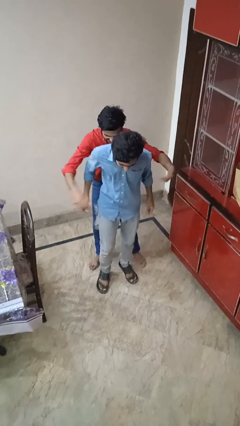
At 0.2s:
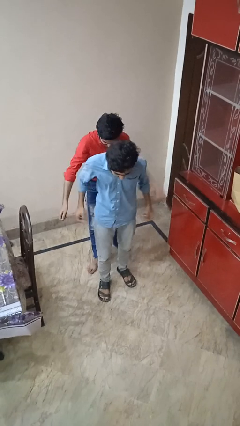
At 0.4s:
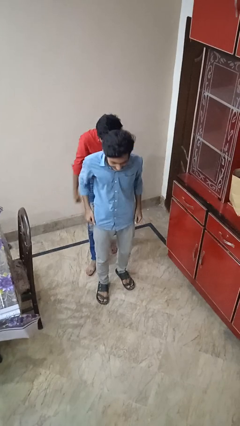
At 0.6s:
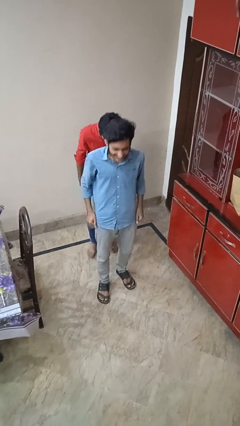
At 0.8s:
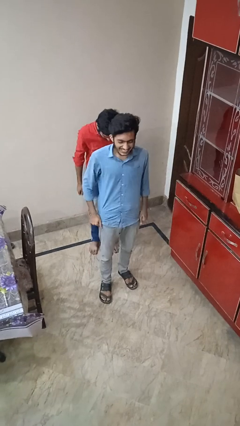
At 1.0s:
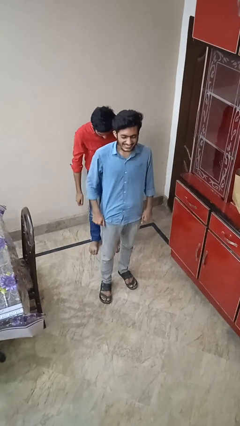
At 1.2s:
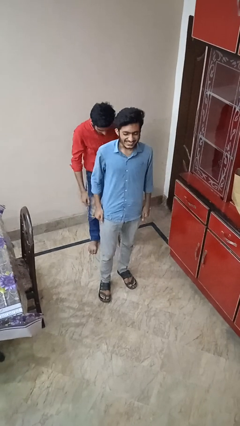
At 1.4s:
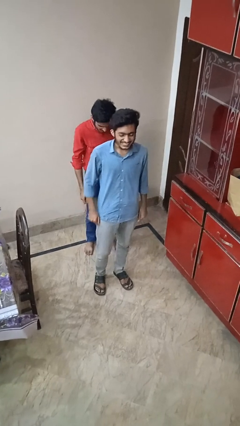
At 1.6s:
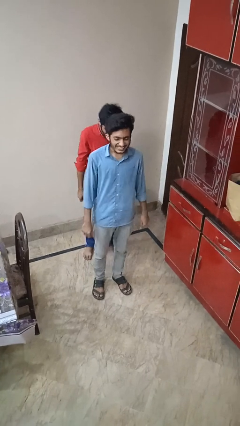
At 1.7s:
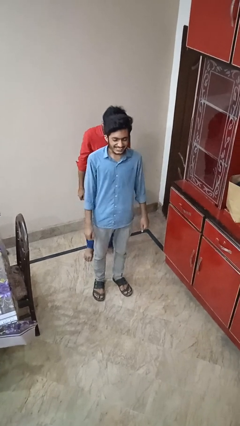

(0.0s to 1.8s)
person puts down person

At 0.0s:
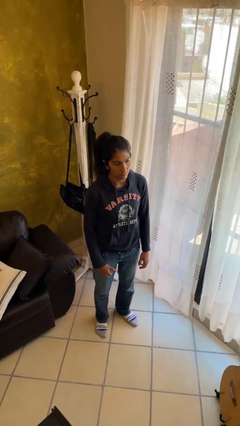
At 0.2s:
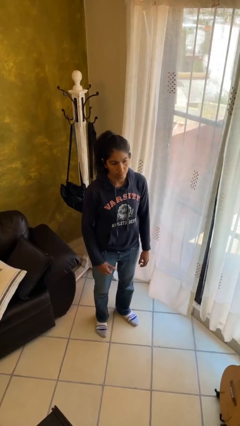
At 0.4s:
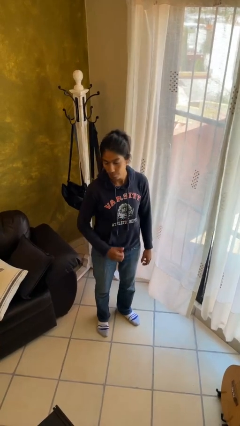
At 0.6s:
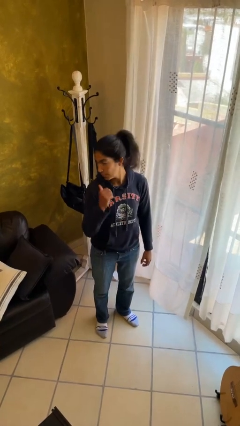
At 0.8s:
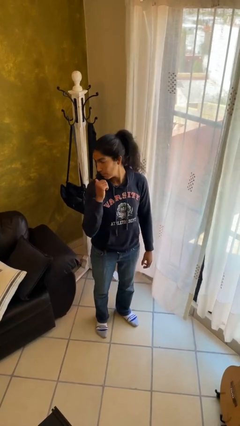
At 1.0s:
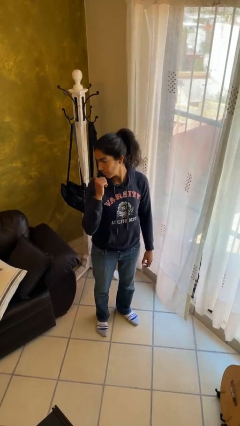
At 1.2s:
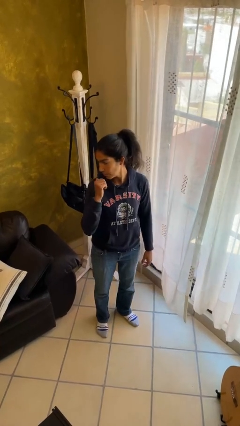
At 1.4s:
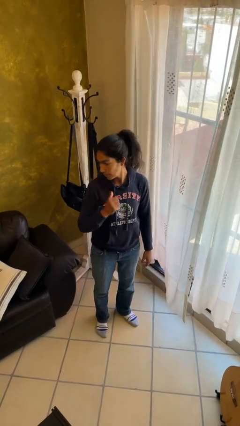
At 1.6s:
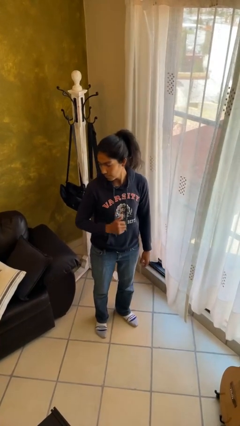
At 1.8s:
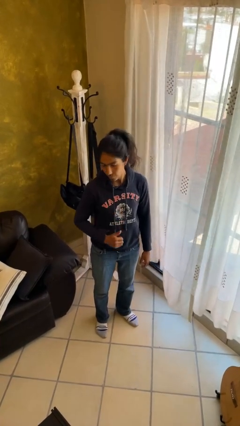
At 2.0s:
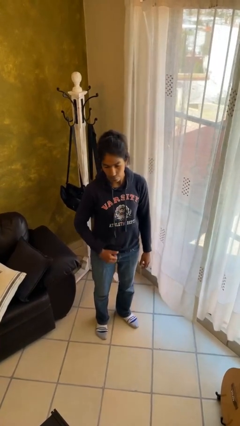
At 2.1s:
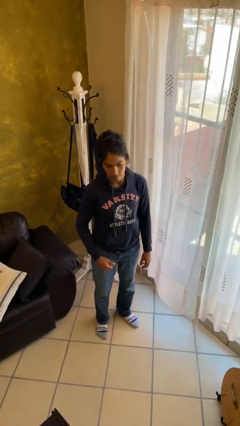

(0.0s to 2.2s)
person gestures behind me

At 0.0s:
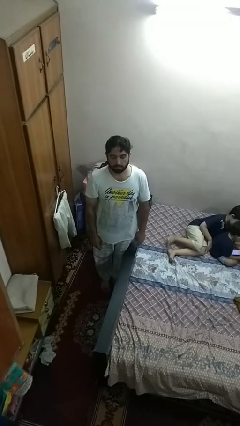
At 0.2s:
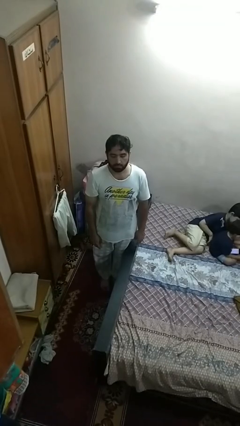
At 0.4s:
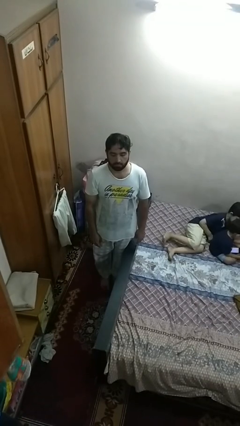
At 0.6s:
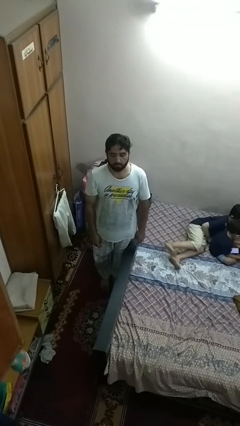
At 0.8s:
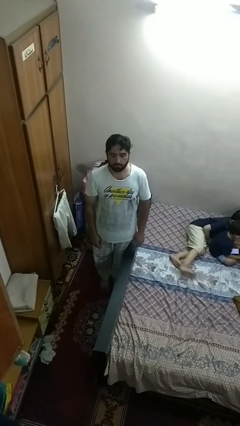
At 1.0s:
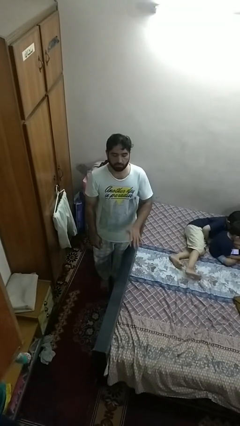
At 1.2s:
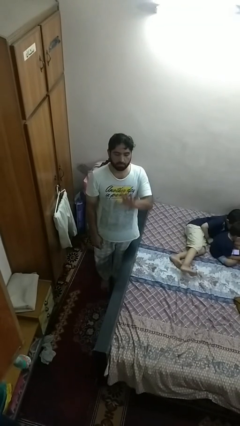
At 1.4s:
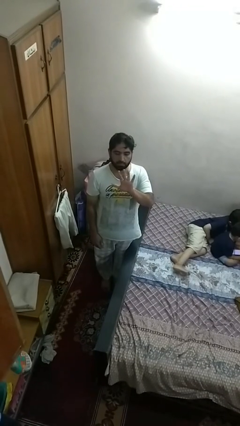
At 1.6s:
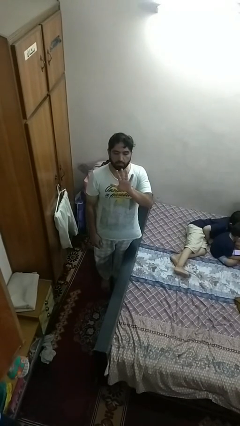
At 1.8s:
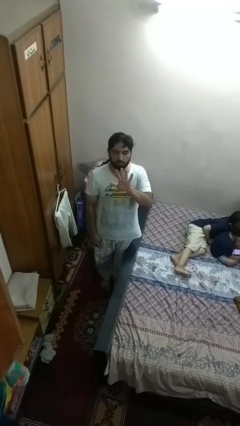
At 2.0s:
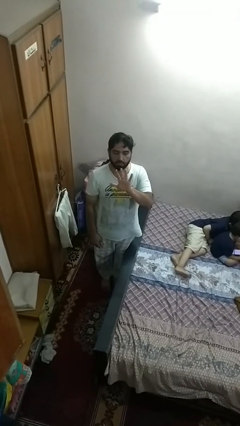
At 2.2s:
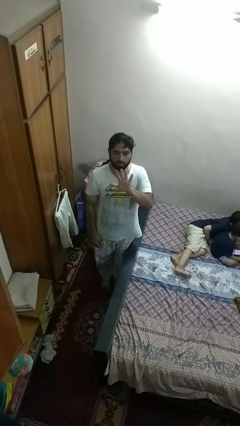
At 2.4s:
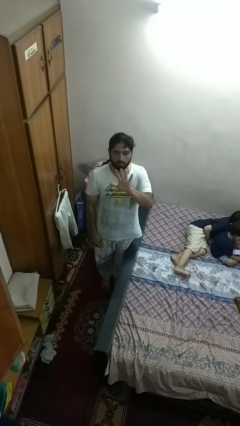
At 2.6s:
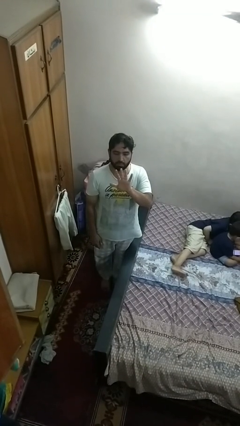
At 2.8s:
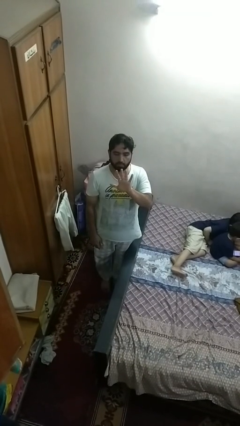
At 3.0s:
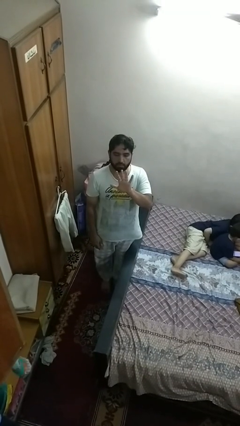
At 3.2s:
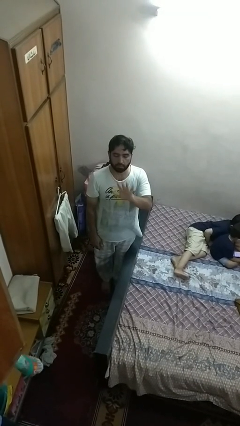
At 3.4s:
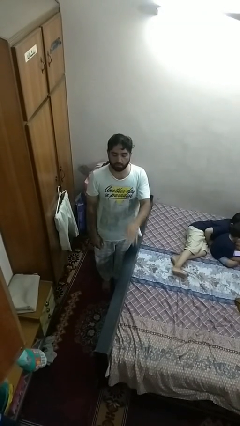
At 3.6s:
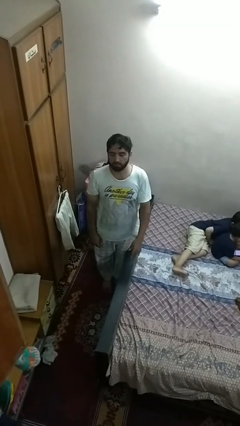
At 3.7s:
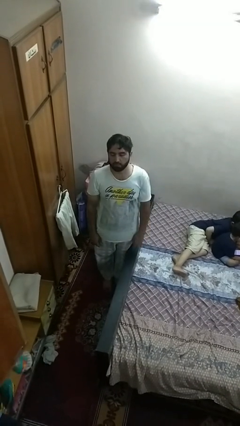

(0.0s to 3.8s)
person gestures number five

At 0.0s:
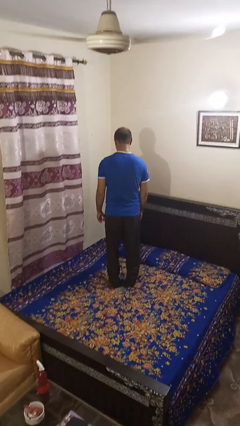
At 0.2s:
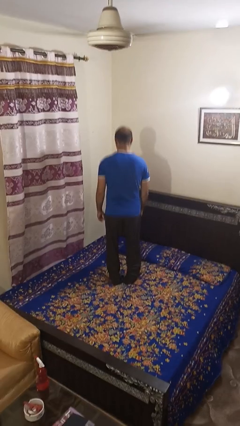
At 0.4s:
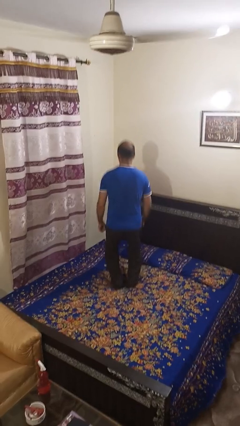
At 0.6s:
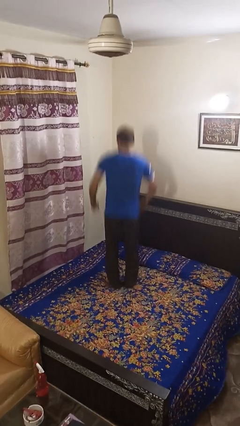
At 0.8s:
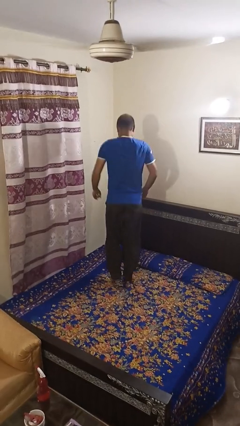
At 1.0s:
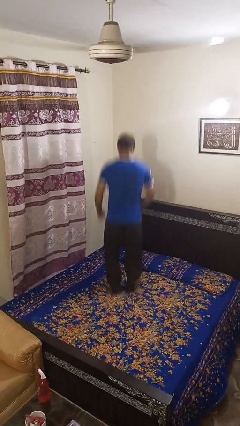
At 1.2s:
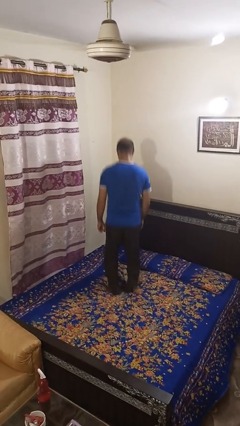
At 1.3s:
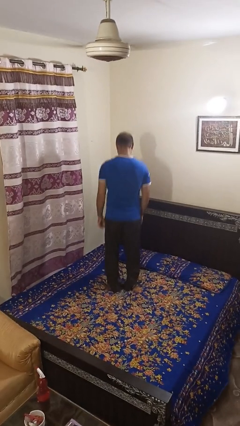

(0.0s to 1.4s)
person jumps on bed

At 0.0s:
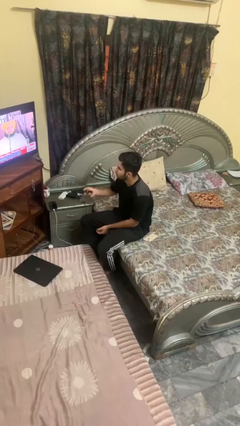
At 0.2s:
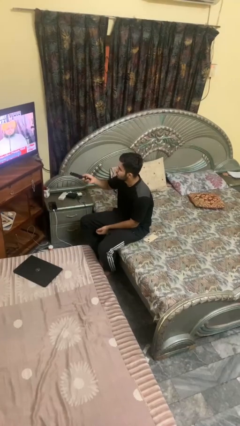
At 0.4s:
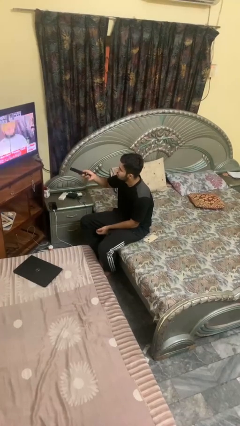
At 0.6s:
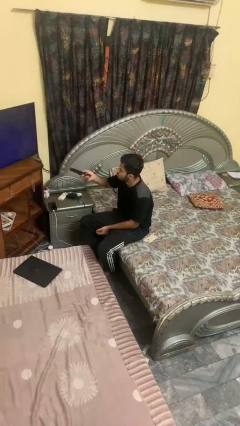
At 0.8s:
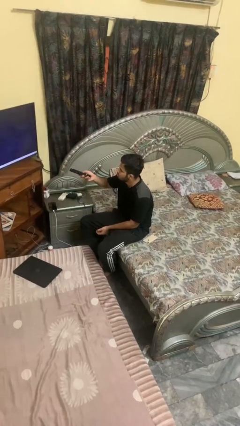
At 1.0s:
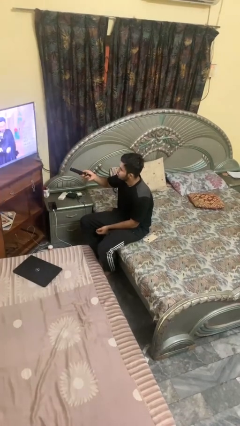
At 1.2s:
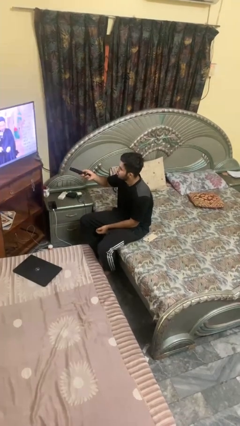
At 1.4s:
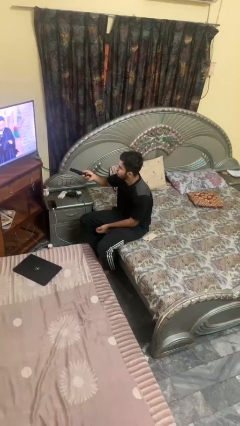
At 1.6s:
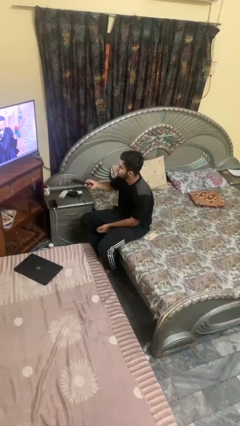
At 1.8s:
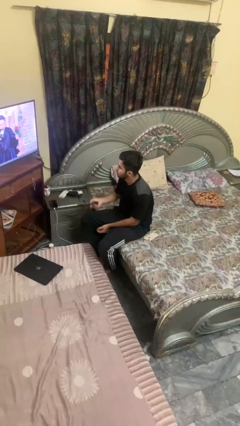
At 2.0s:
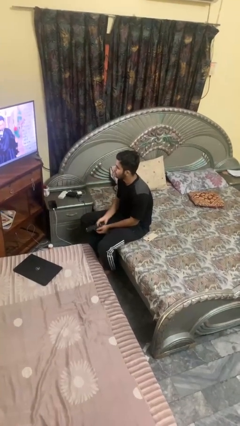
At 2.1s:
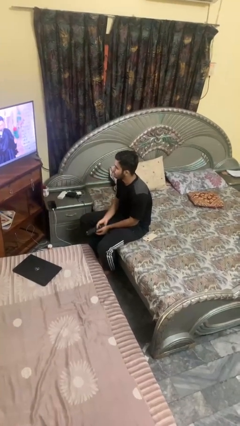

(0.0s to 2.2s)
person uses television remote

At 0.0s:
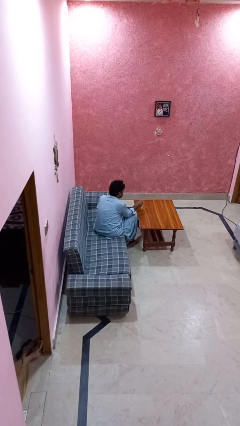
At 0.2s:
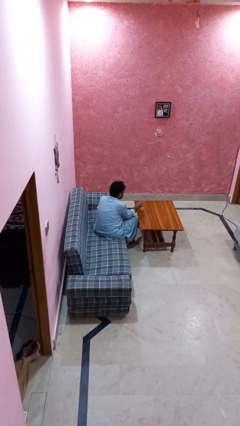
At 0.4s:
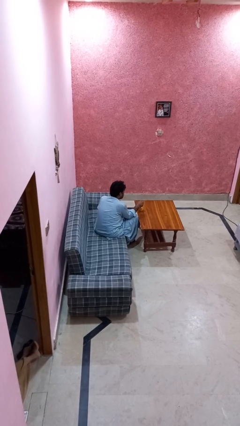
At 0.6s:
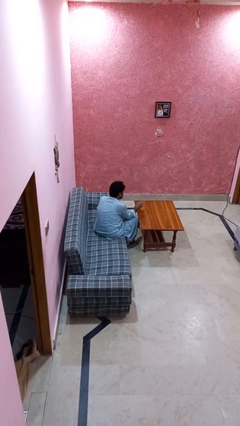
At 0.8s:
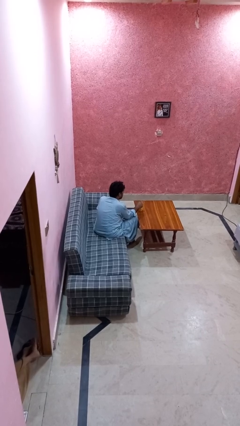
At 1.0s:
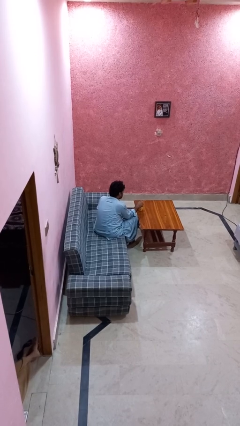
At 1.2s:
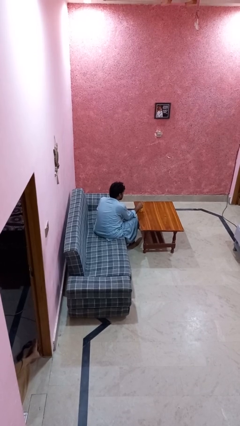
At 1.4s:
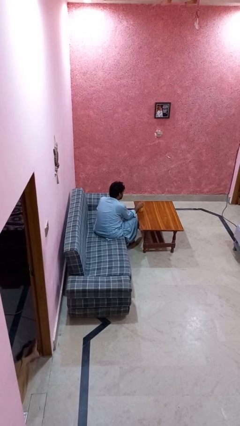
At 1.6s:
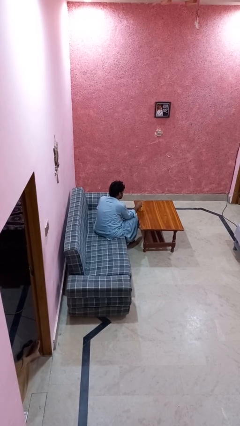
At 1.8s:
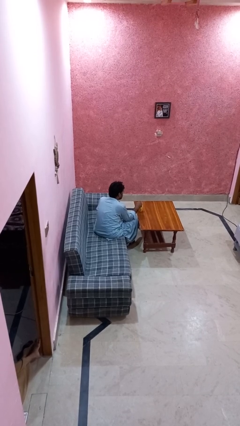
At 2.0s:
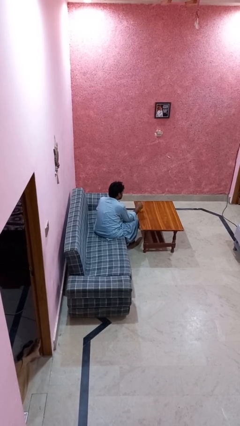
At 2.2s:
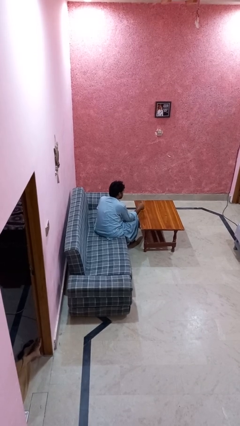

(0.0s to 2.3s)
person stirs mug

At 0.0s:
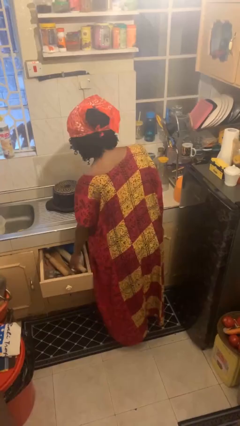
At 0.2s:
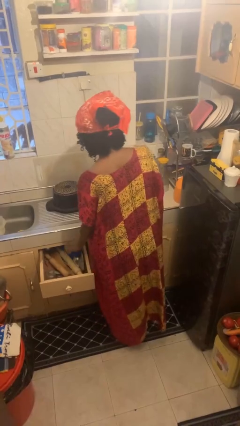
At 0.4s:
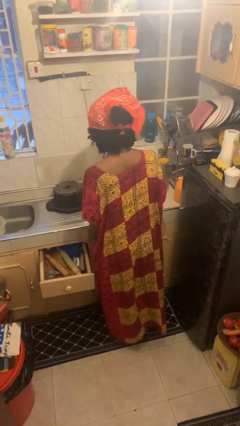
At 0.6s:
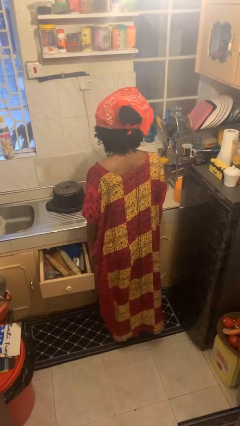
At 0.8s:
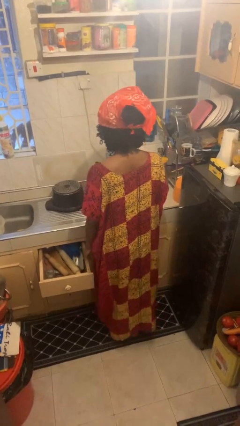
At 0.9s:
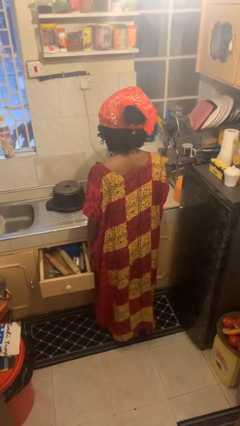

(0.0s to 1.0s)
person puts object into kitchen drawer

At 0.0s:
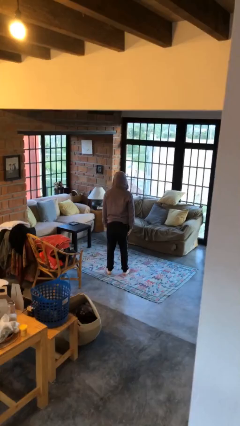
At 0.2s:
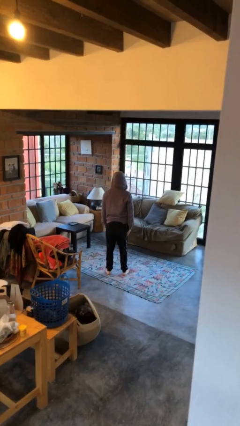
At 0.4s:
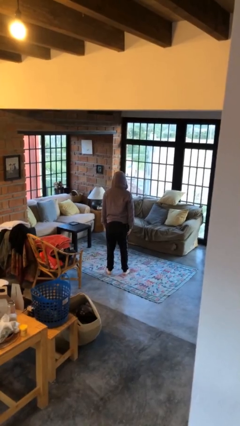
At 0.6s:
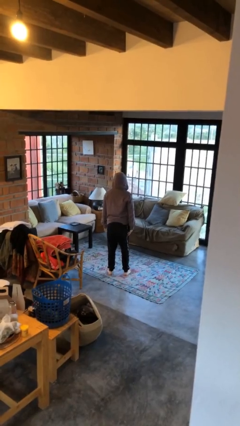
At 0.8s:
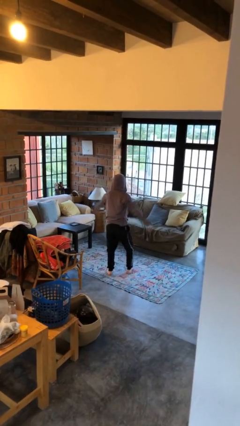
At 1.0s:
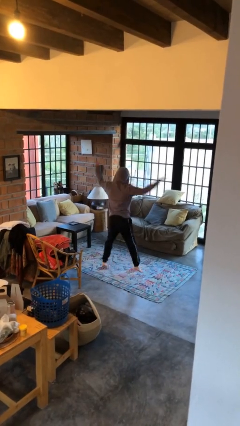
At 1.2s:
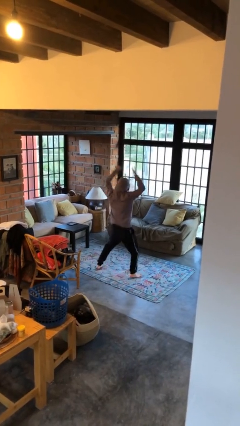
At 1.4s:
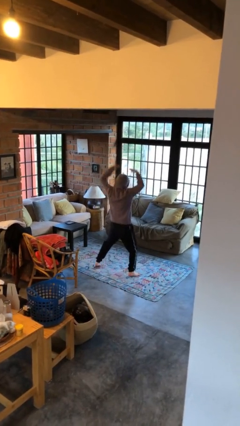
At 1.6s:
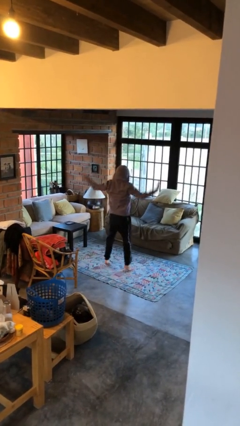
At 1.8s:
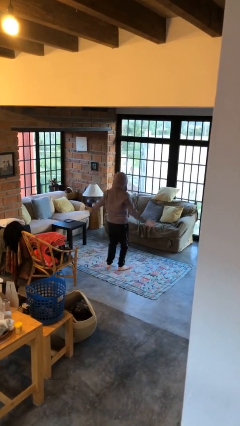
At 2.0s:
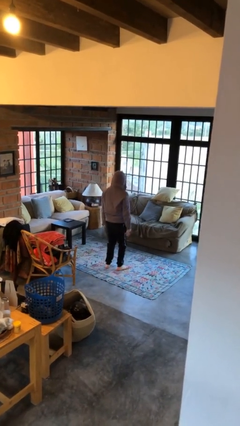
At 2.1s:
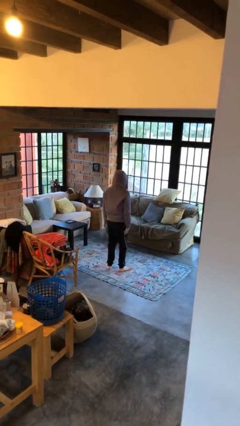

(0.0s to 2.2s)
person exercises with jumping jacks
